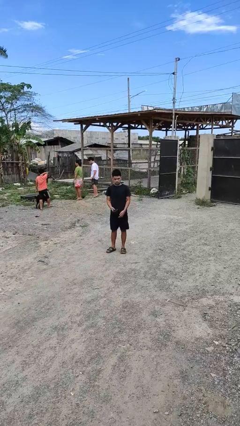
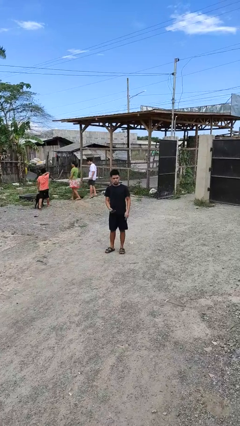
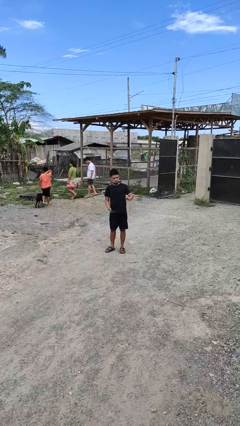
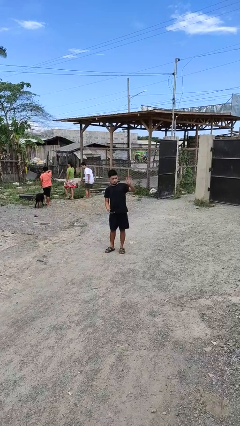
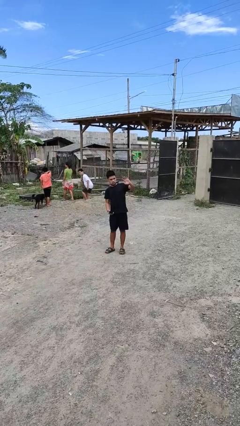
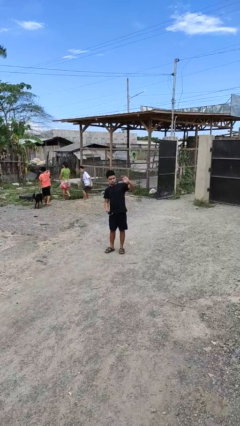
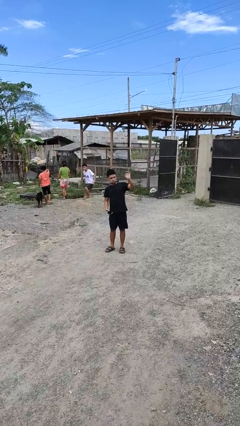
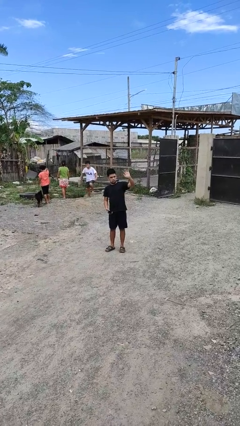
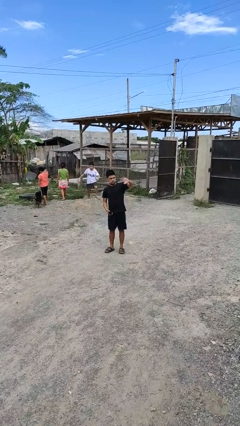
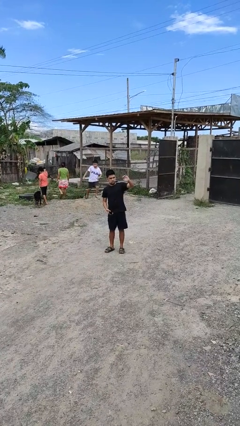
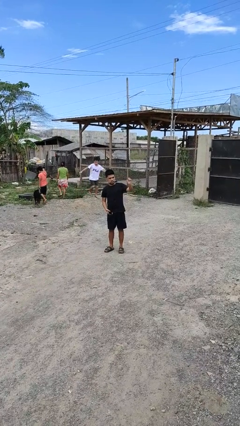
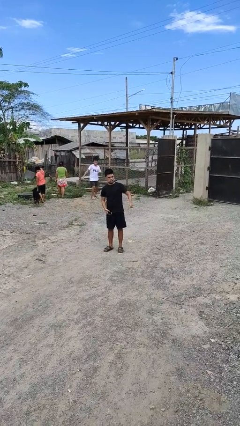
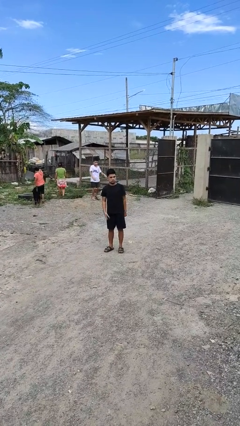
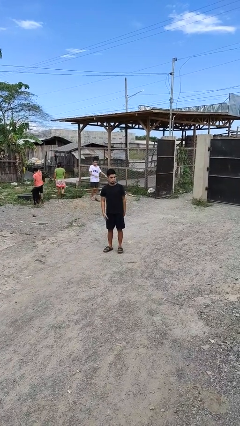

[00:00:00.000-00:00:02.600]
person waves at person

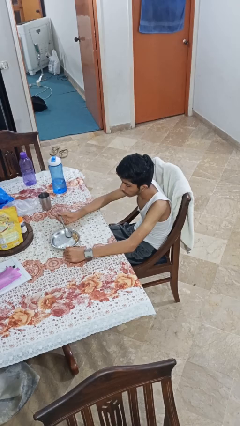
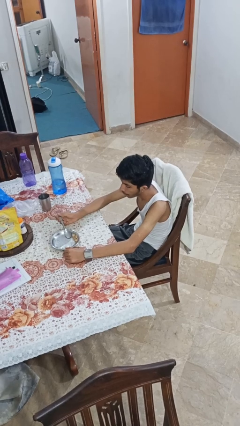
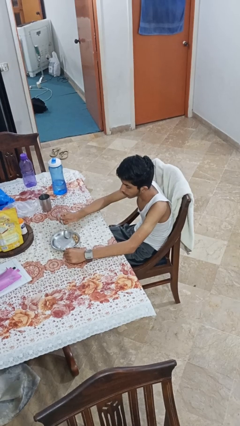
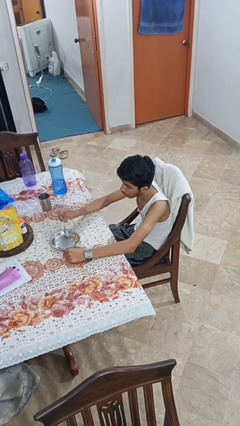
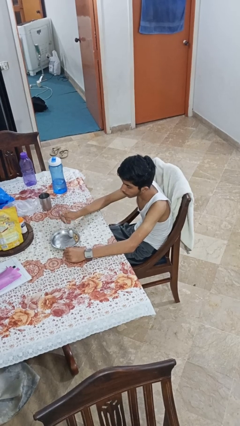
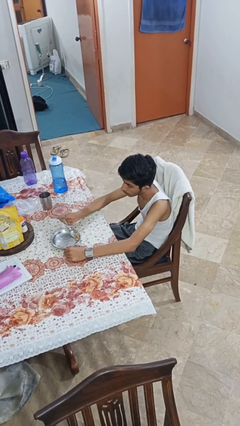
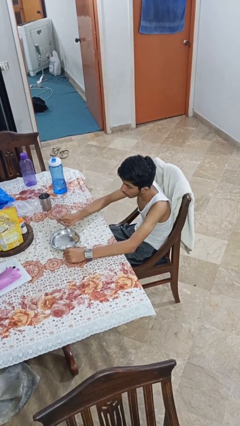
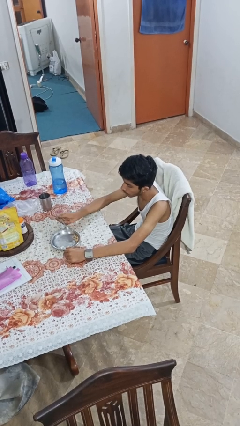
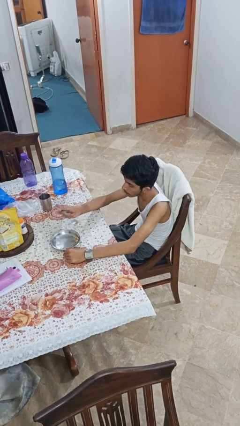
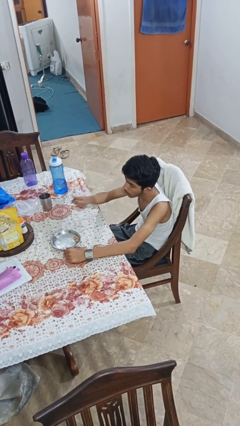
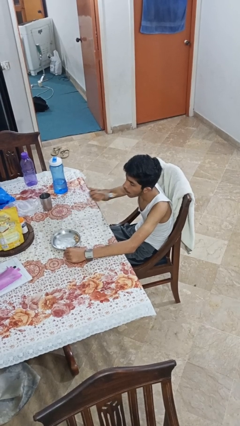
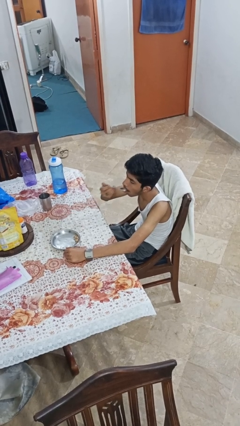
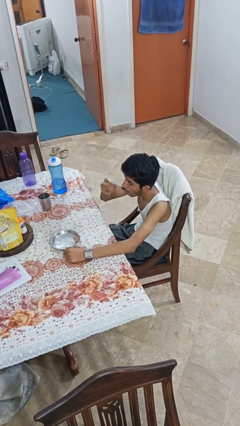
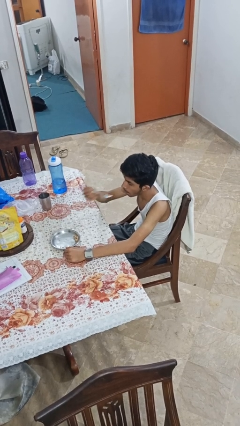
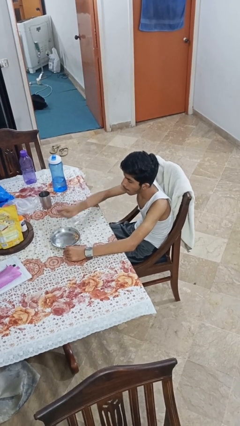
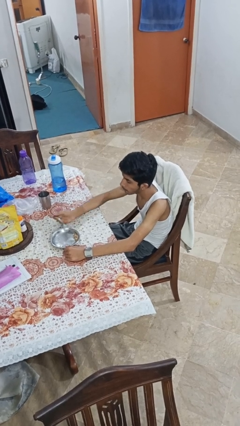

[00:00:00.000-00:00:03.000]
person eats with utensil

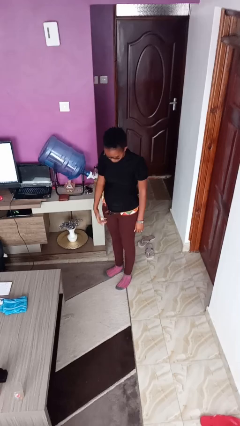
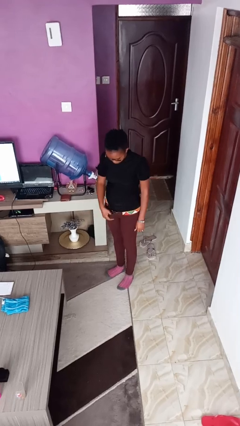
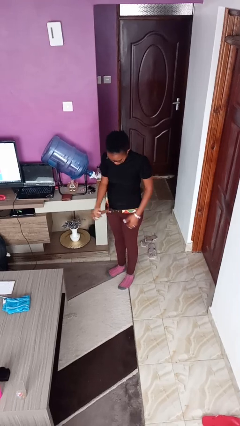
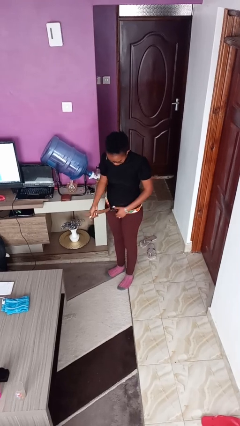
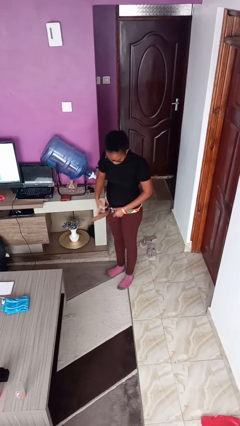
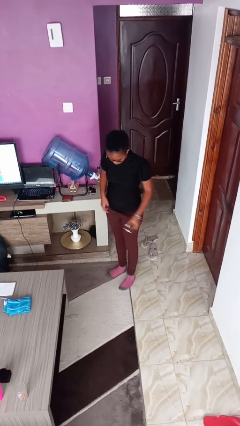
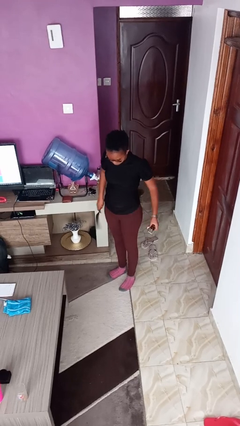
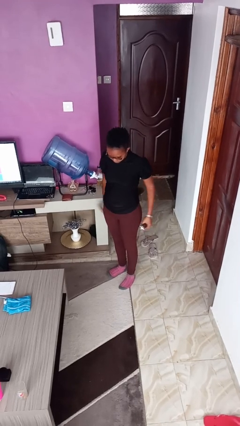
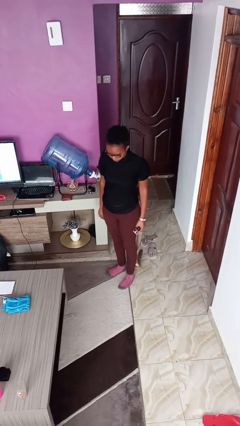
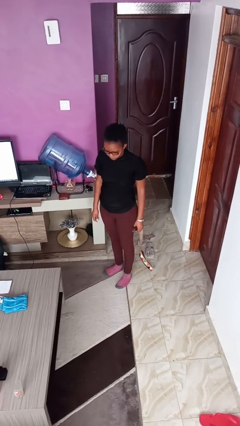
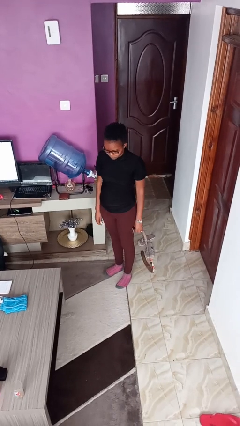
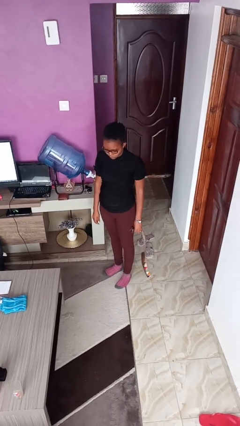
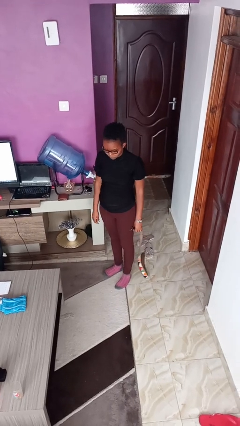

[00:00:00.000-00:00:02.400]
person takes off belt

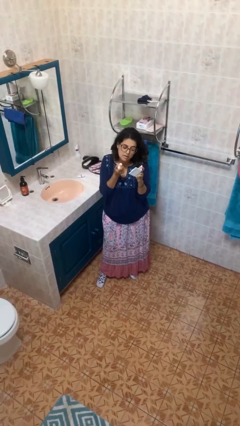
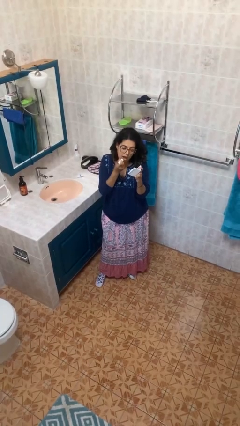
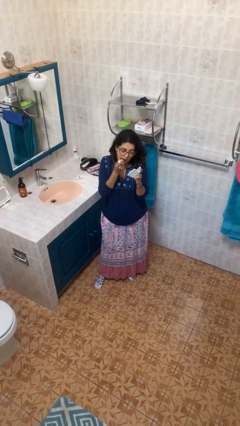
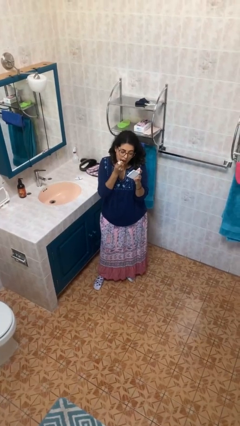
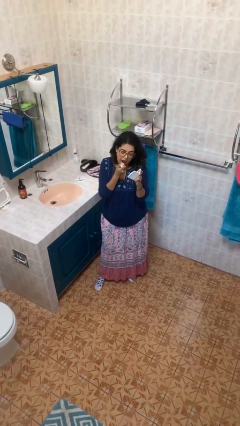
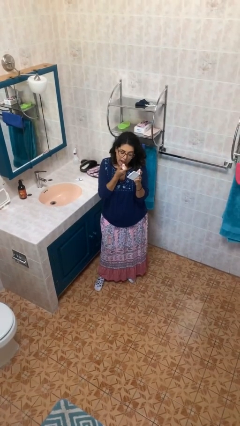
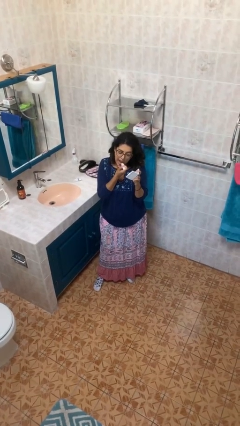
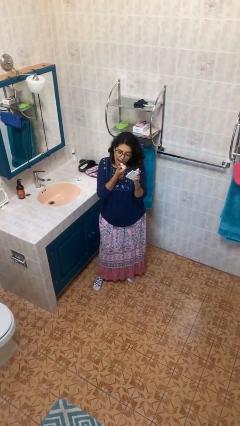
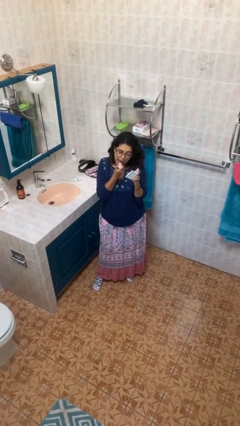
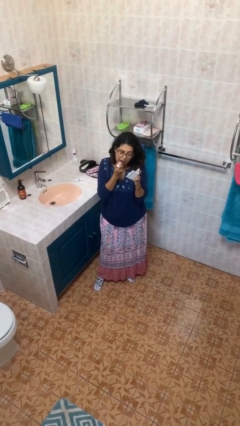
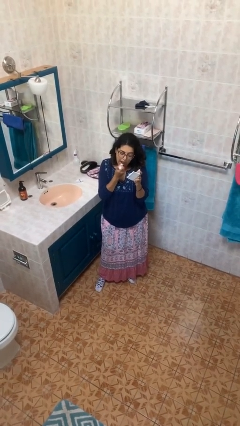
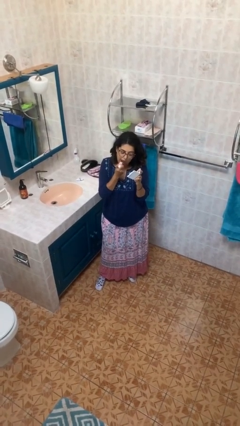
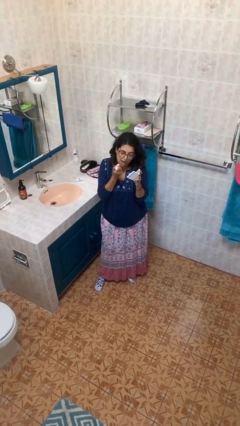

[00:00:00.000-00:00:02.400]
person applies lip makeup

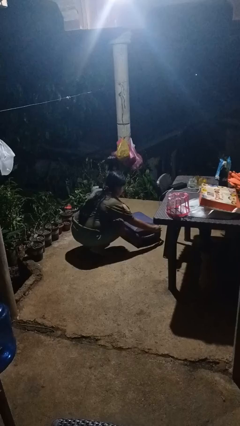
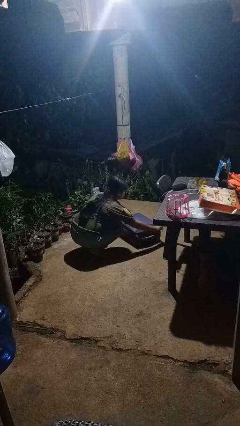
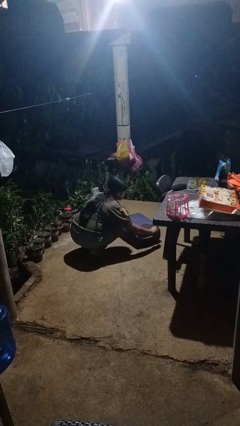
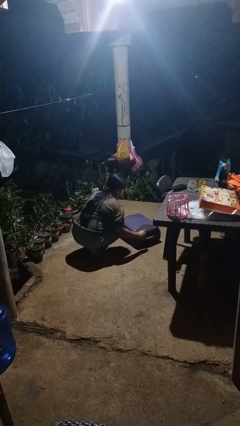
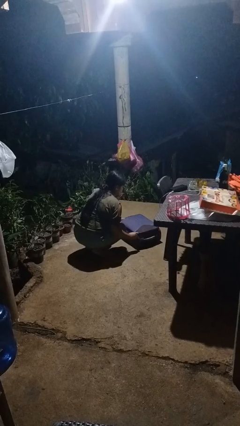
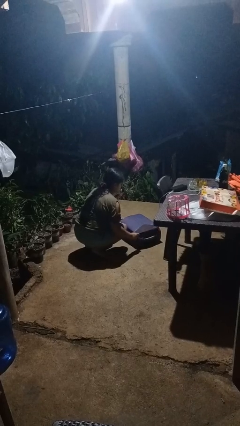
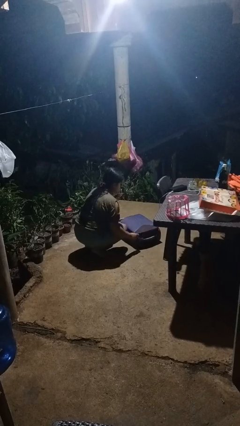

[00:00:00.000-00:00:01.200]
person closes suitcase

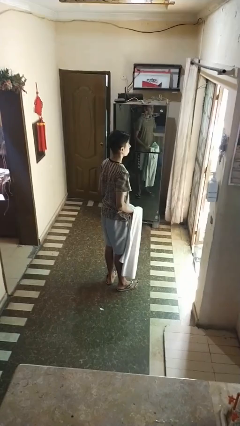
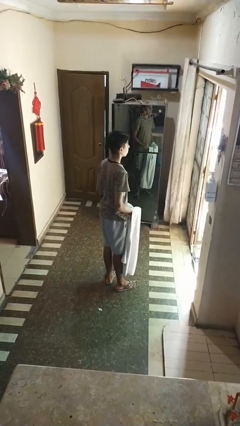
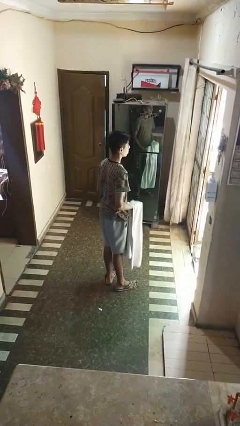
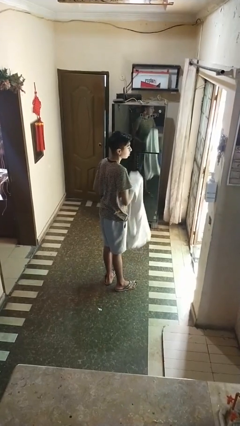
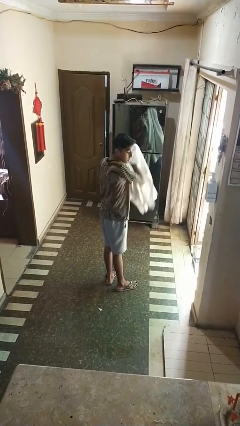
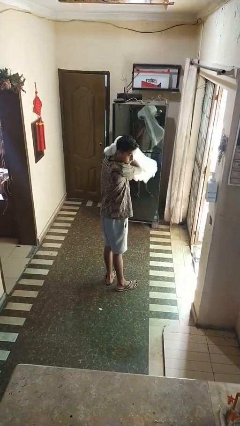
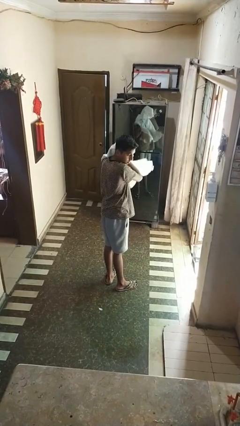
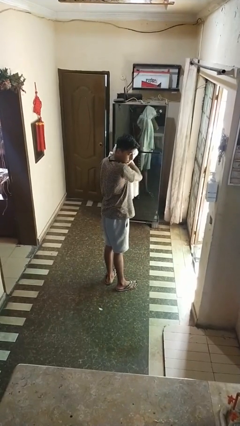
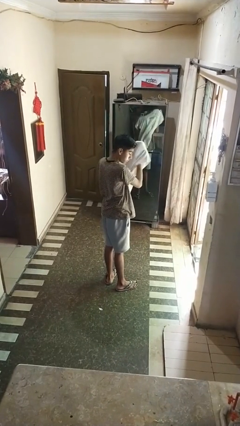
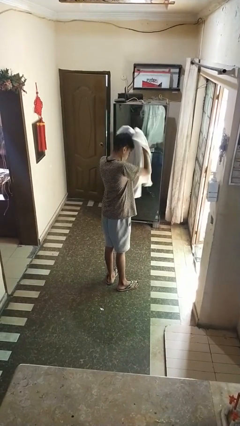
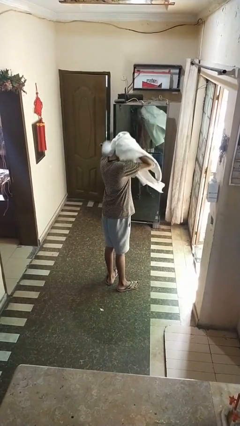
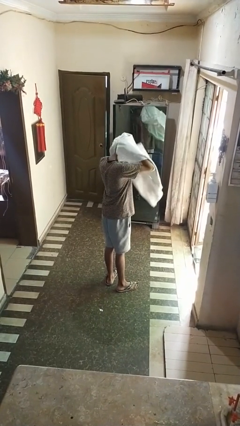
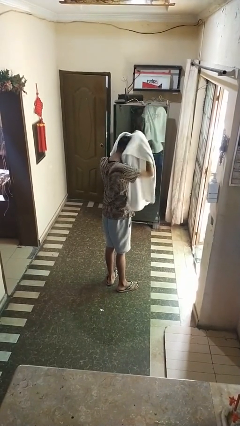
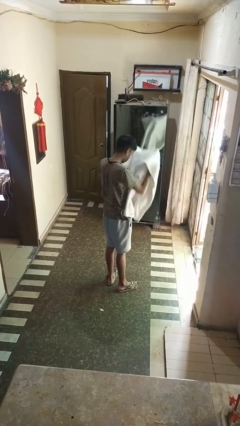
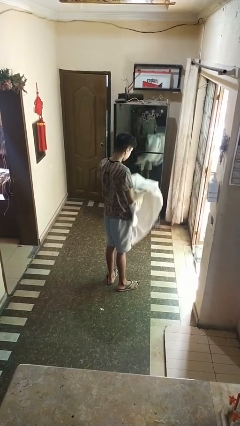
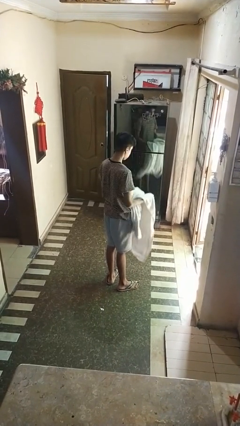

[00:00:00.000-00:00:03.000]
person dries hair with towel

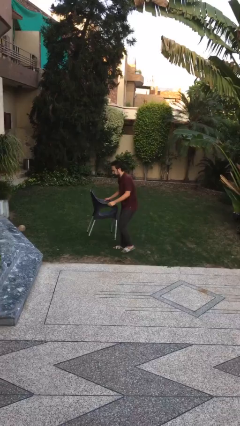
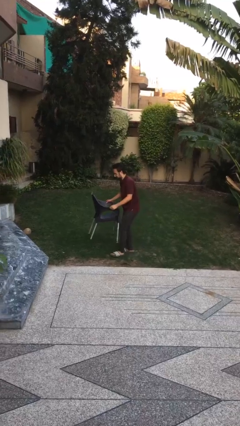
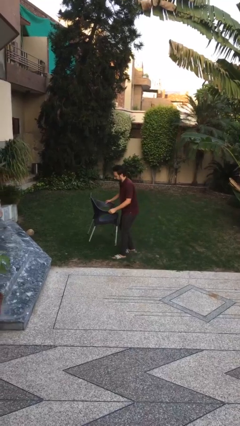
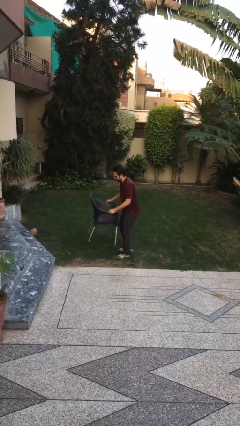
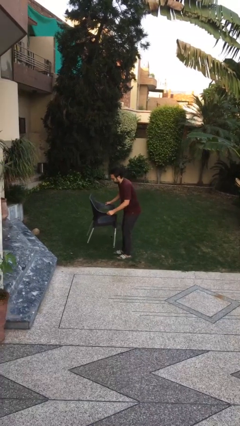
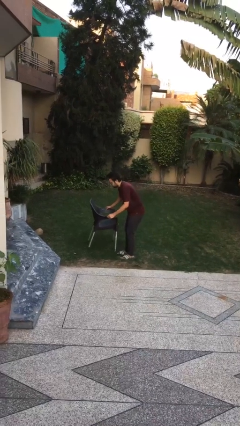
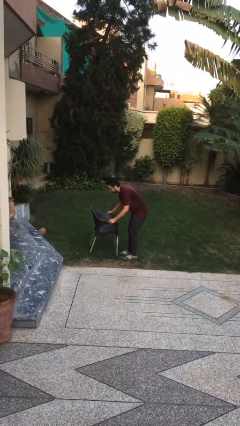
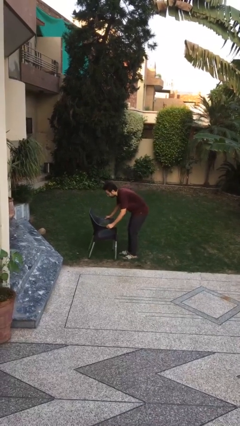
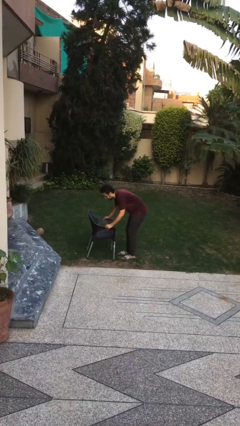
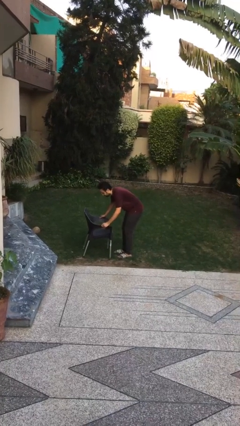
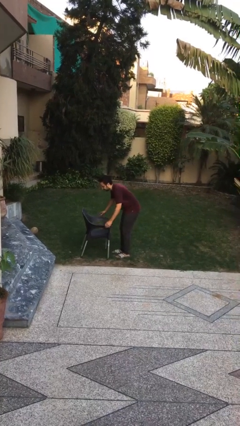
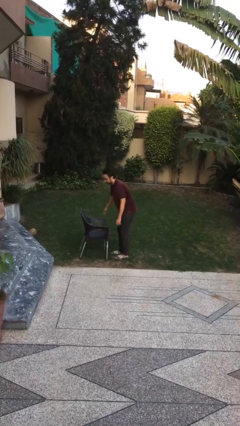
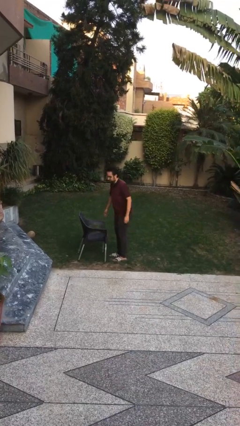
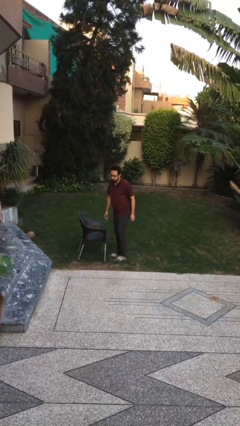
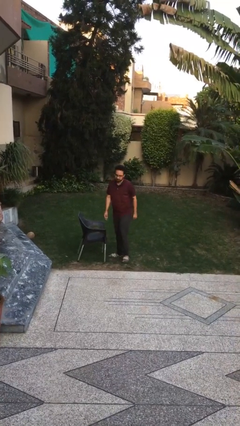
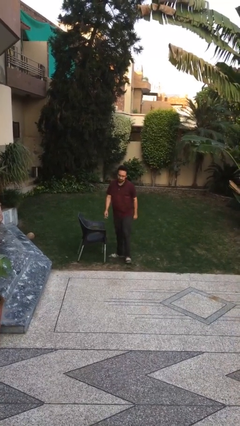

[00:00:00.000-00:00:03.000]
person puts down object on floor
